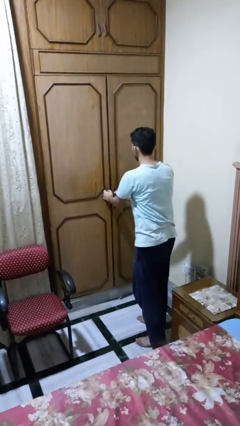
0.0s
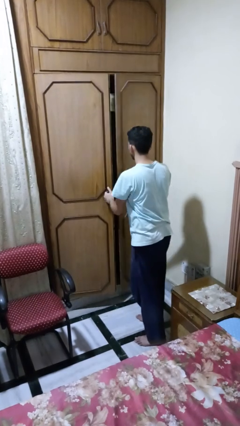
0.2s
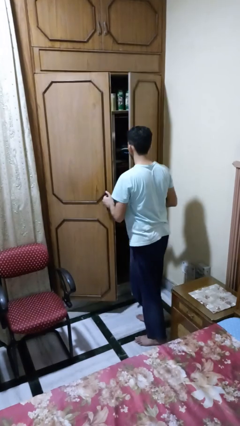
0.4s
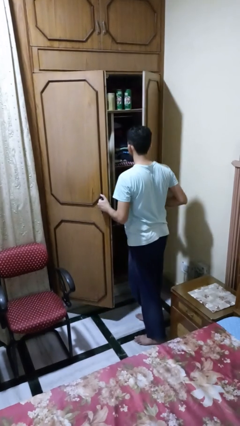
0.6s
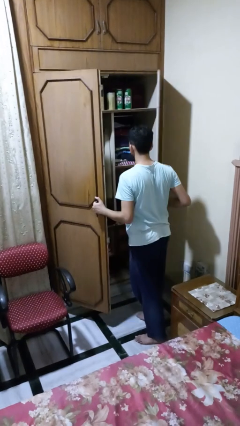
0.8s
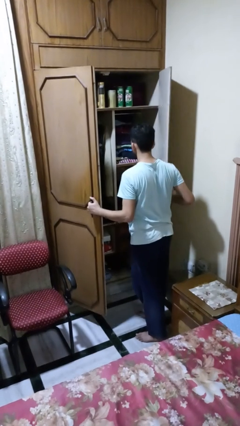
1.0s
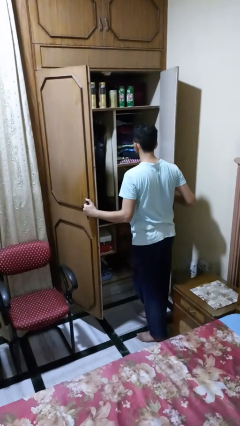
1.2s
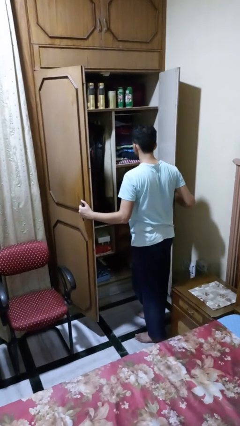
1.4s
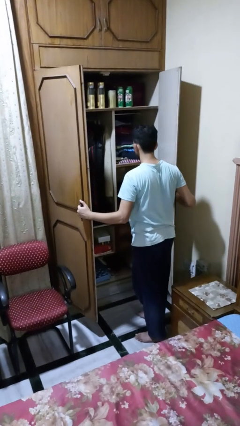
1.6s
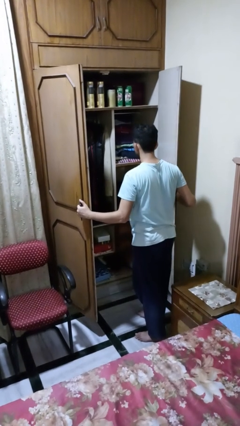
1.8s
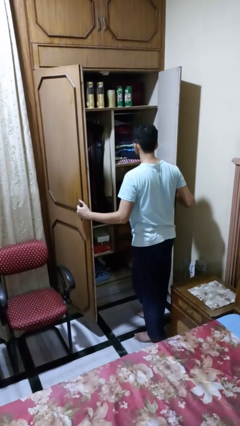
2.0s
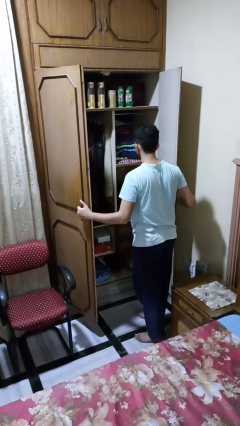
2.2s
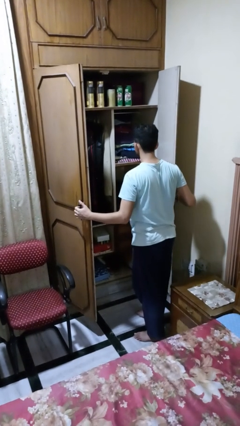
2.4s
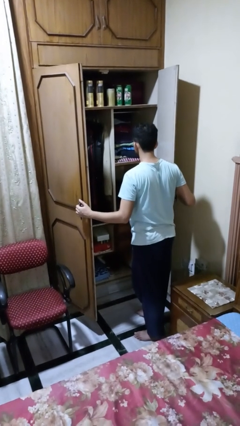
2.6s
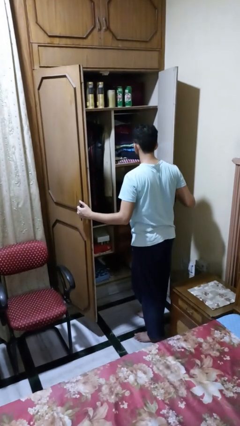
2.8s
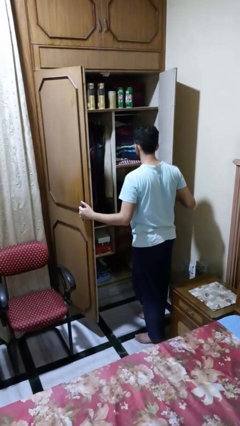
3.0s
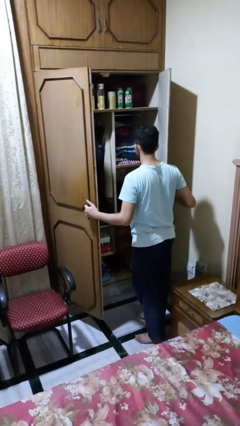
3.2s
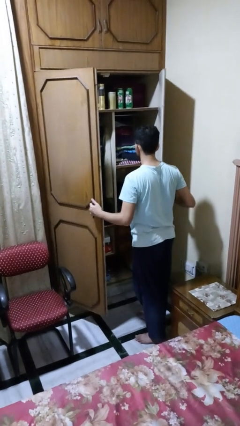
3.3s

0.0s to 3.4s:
person opens closet door

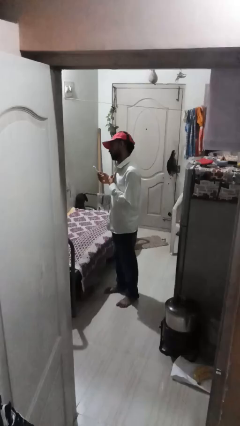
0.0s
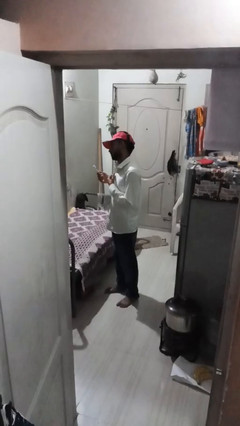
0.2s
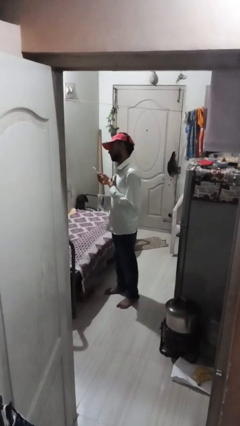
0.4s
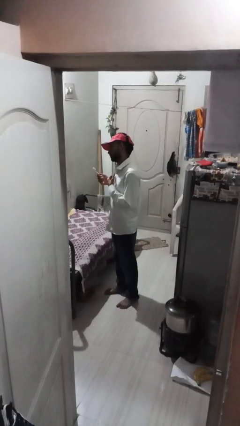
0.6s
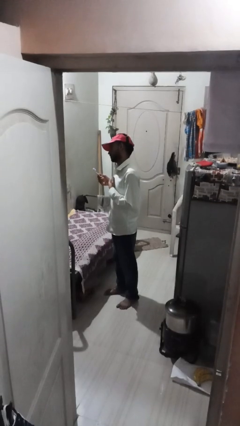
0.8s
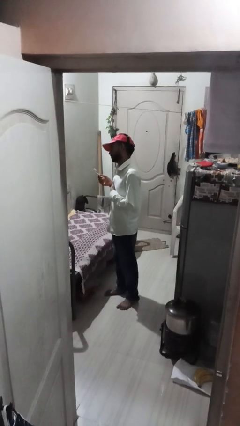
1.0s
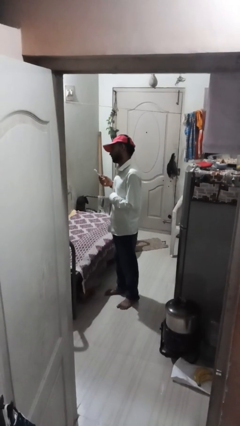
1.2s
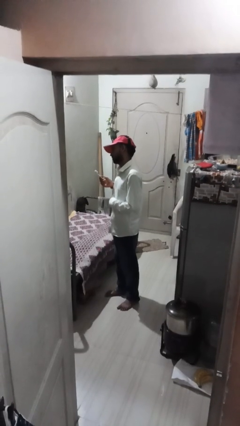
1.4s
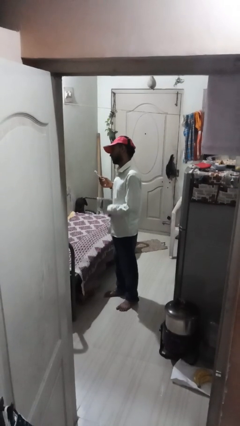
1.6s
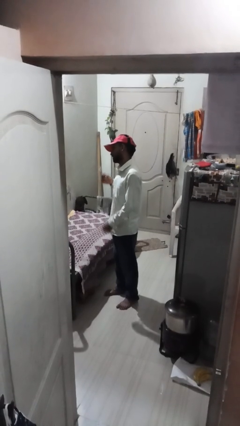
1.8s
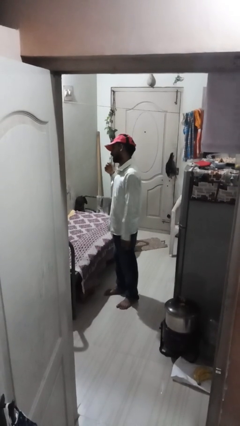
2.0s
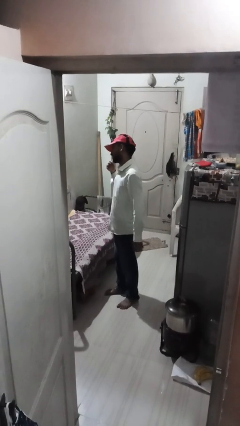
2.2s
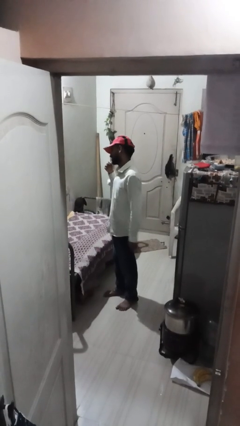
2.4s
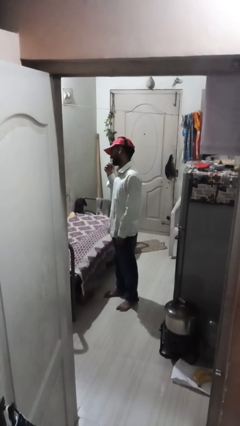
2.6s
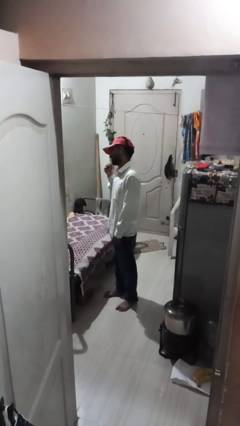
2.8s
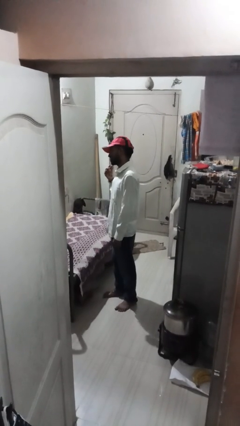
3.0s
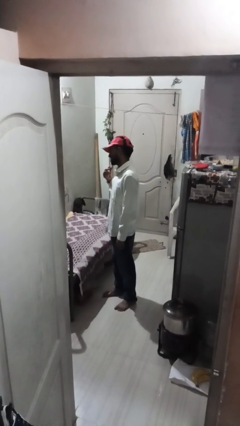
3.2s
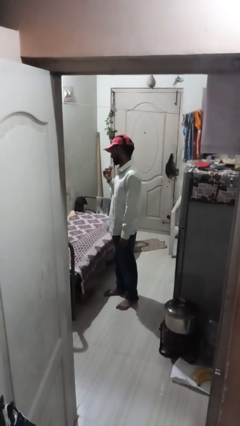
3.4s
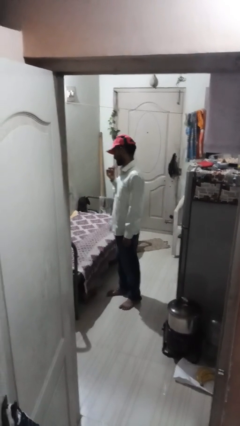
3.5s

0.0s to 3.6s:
person brushes teeth

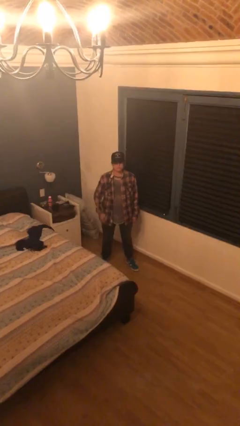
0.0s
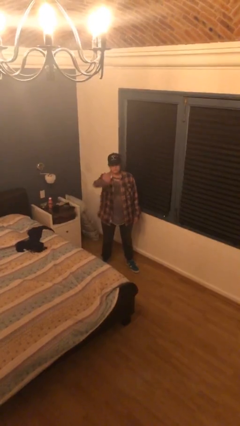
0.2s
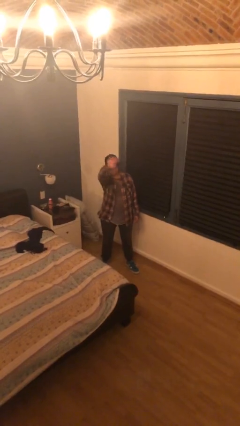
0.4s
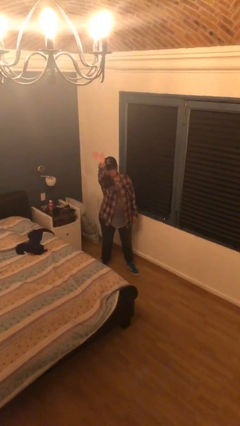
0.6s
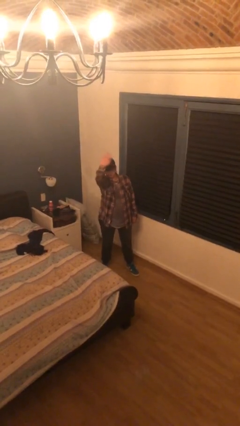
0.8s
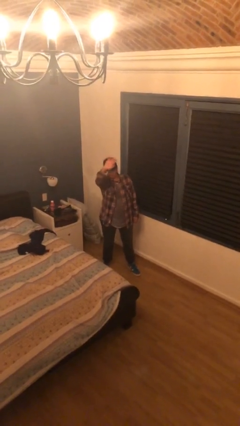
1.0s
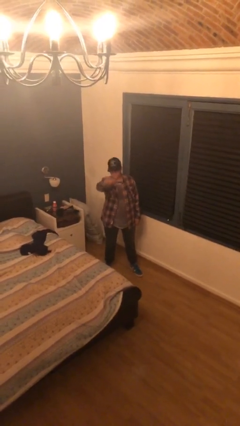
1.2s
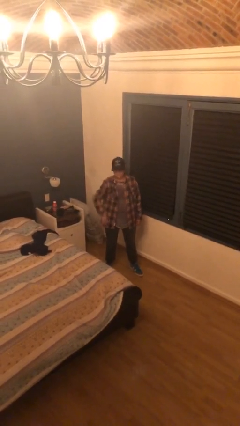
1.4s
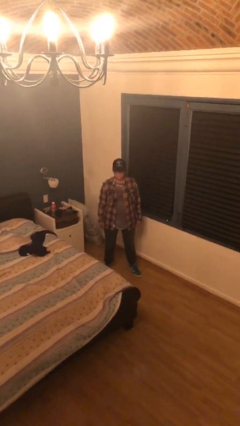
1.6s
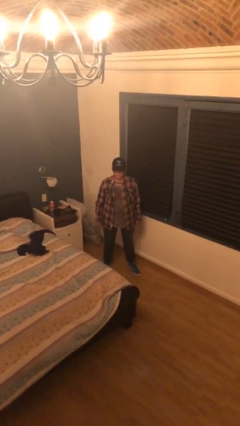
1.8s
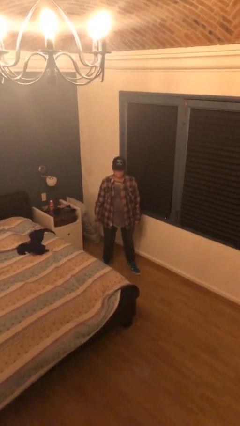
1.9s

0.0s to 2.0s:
person waves at person

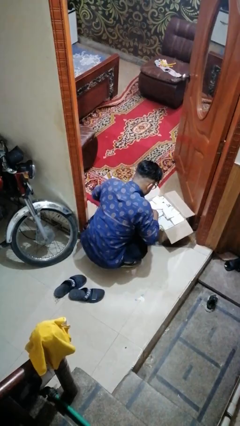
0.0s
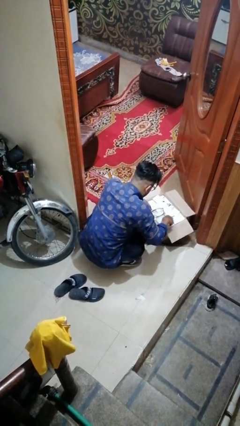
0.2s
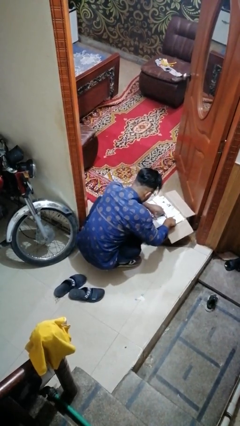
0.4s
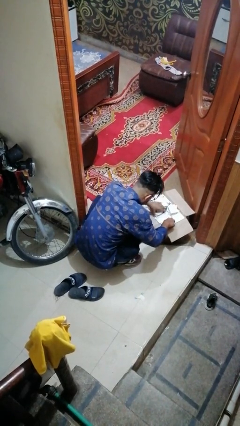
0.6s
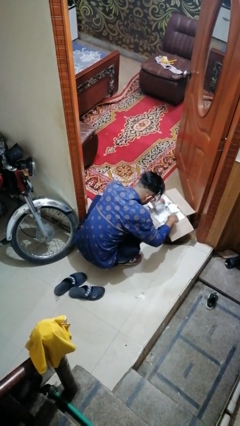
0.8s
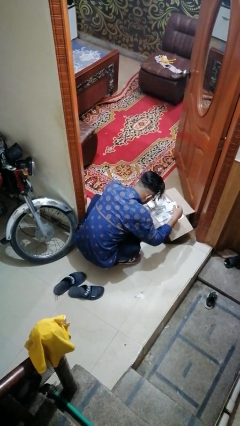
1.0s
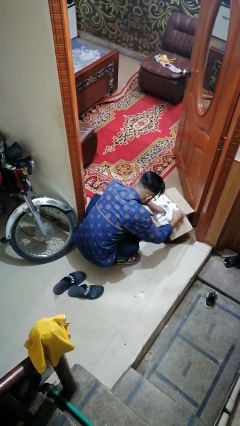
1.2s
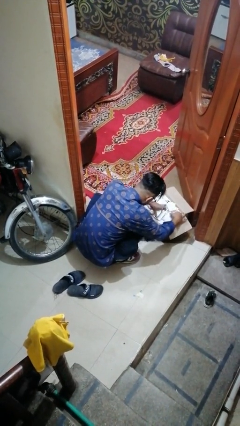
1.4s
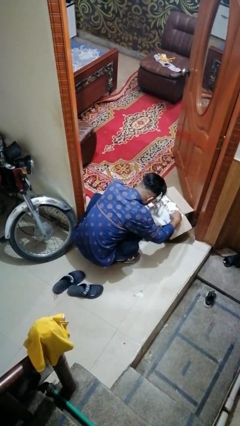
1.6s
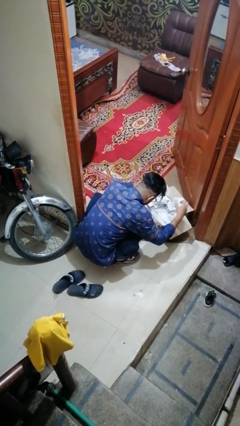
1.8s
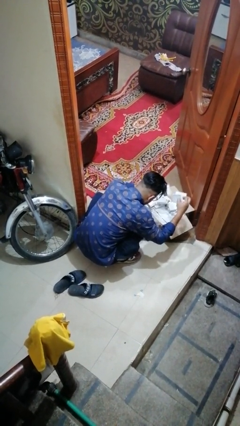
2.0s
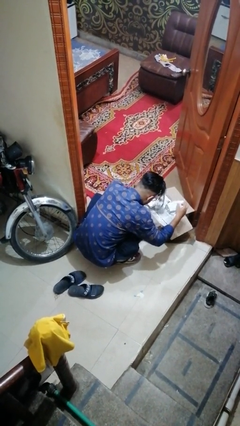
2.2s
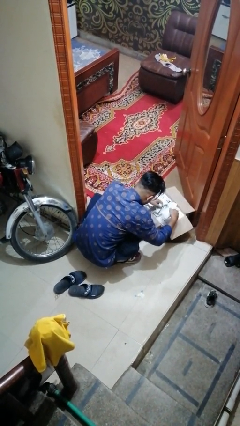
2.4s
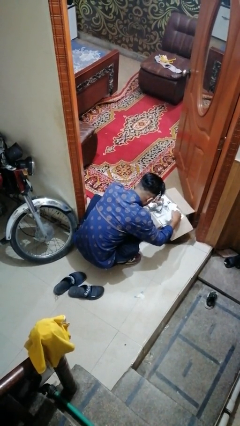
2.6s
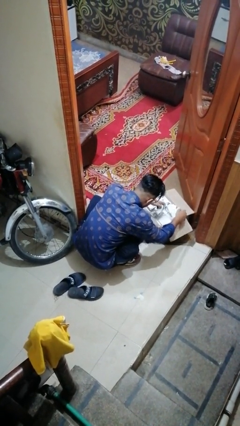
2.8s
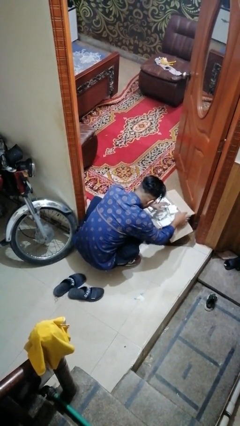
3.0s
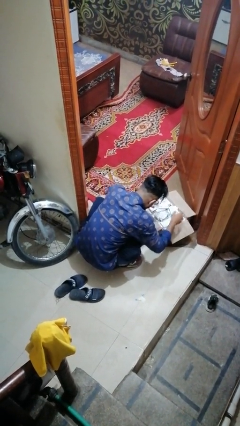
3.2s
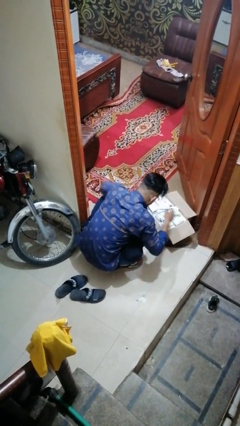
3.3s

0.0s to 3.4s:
person searches in box

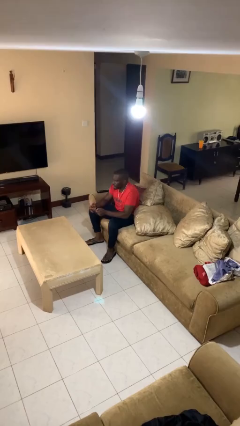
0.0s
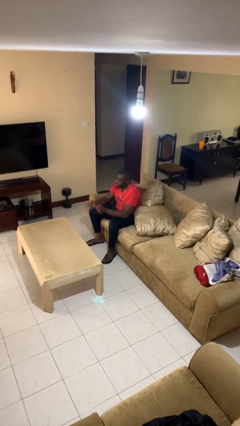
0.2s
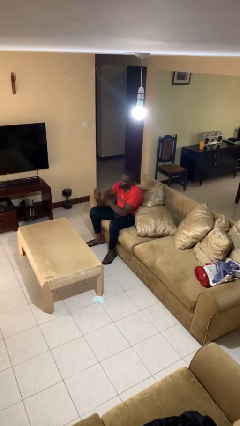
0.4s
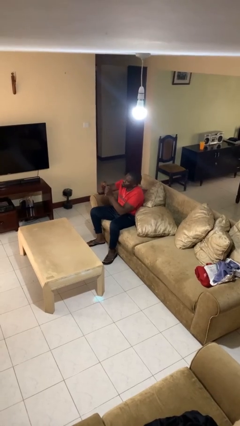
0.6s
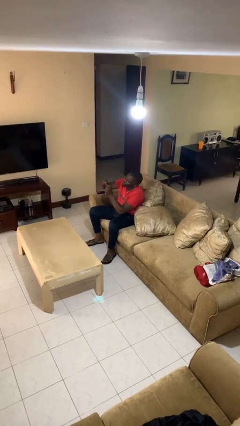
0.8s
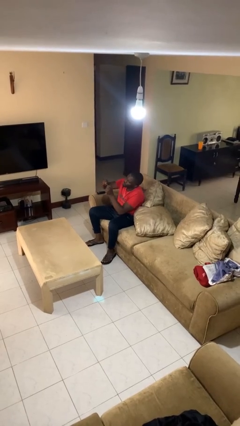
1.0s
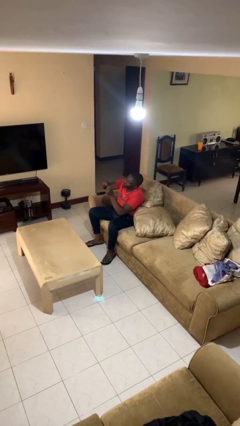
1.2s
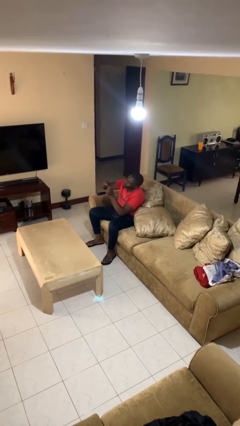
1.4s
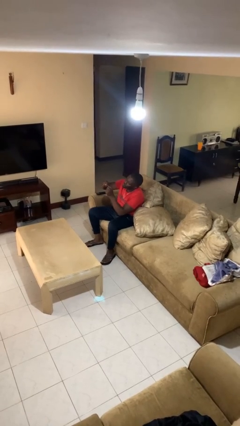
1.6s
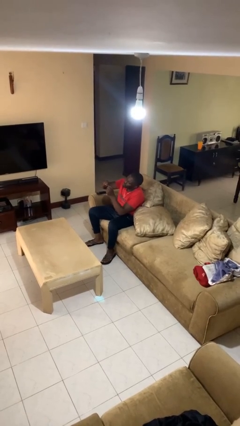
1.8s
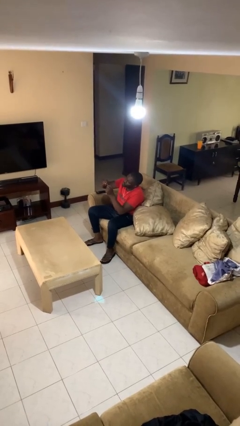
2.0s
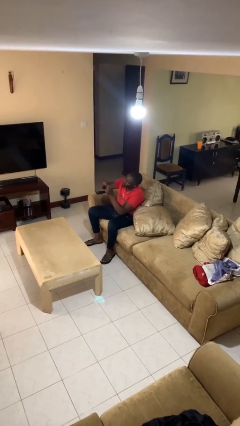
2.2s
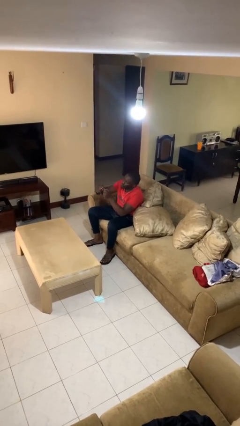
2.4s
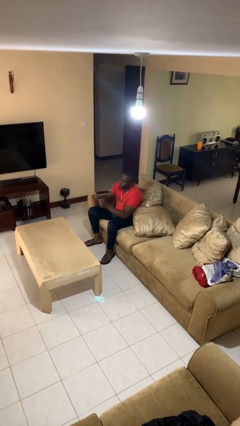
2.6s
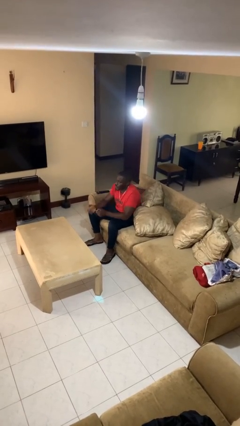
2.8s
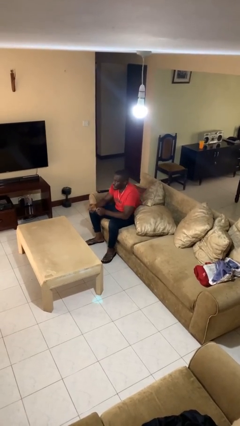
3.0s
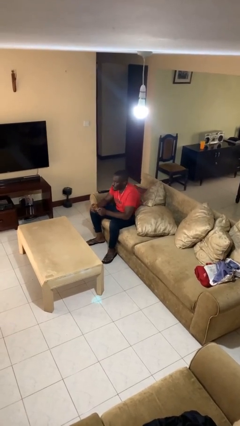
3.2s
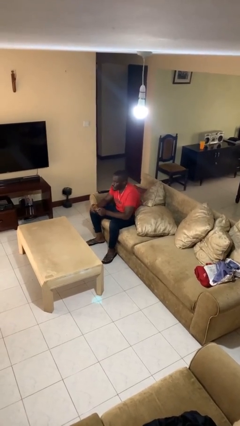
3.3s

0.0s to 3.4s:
person clips fingernails

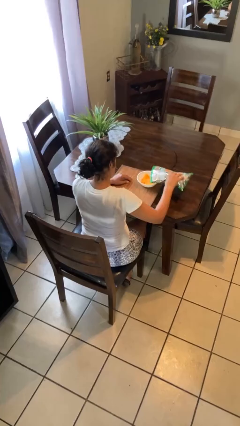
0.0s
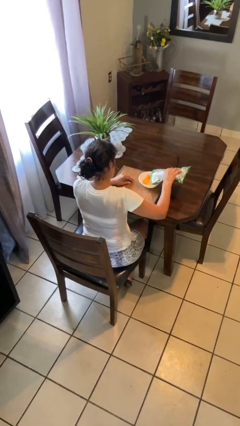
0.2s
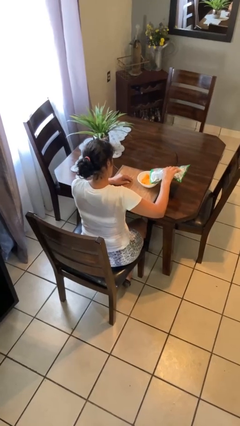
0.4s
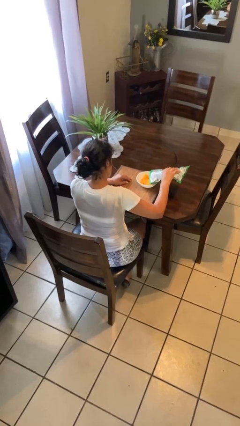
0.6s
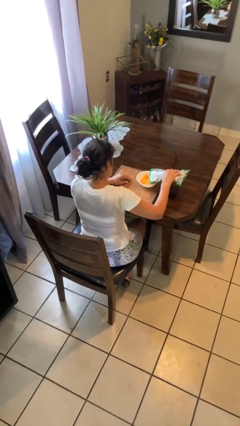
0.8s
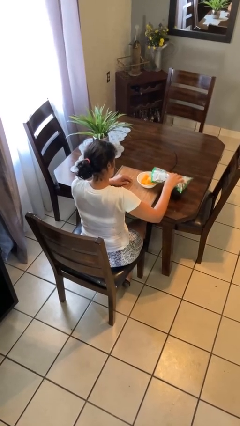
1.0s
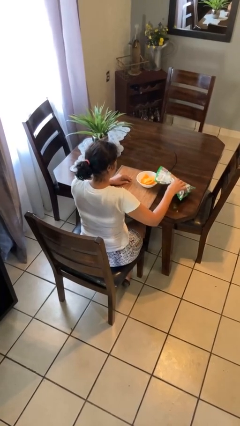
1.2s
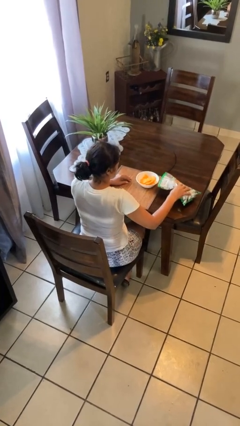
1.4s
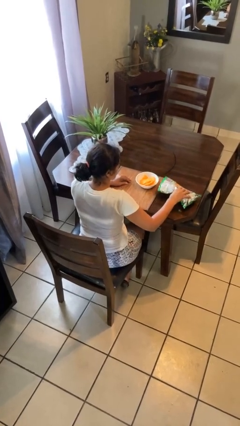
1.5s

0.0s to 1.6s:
person pours into bowl
